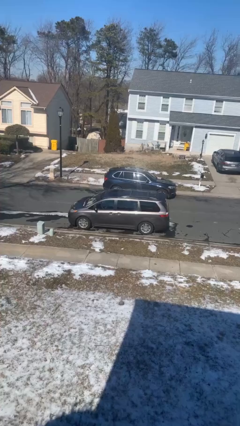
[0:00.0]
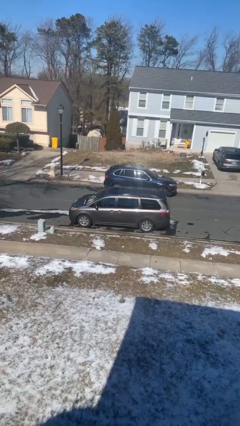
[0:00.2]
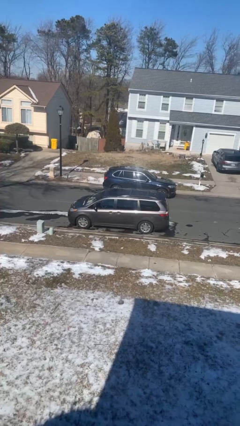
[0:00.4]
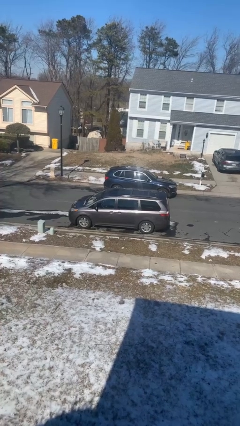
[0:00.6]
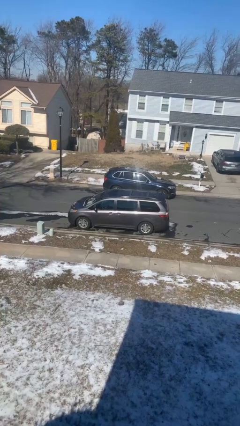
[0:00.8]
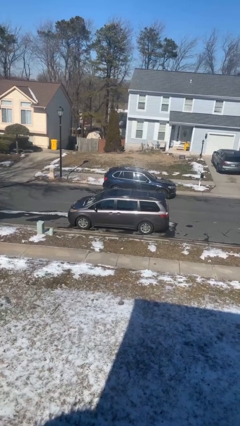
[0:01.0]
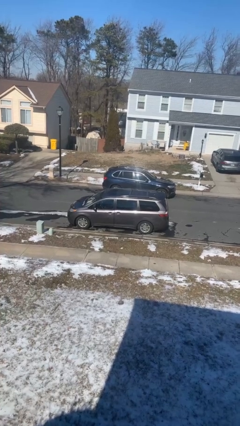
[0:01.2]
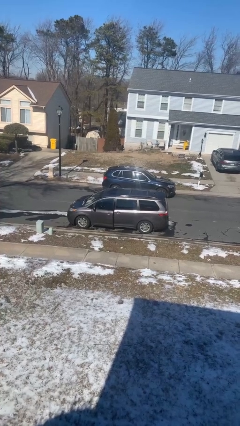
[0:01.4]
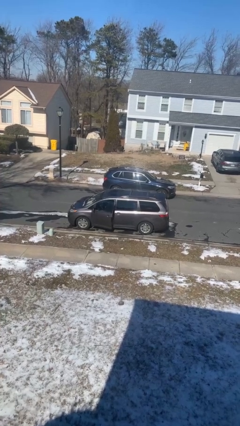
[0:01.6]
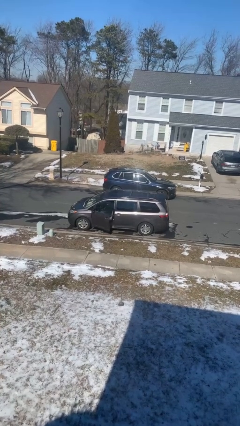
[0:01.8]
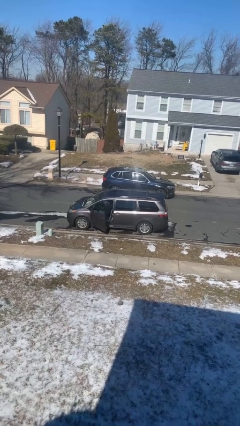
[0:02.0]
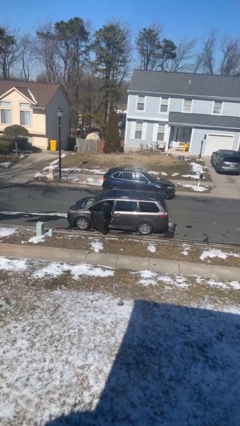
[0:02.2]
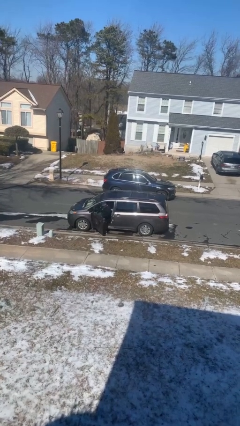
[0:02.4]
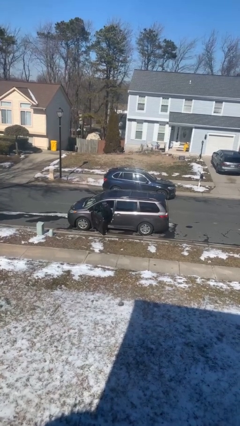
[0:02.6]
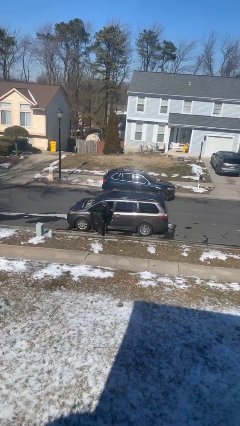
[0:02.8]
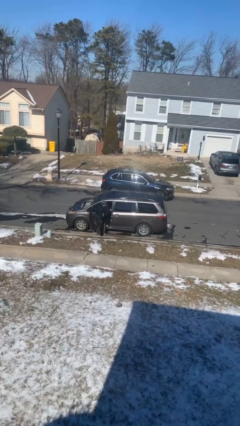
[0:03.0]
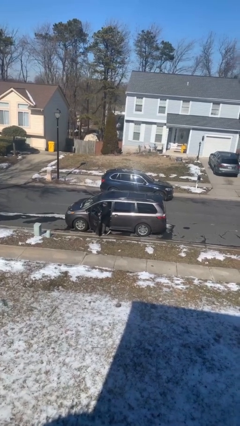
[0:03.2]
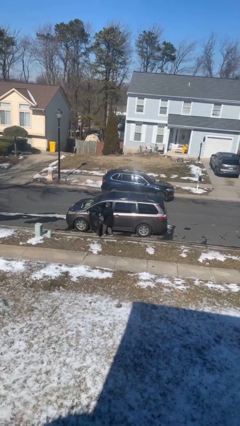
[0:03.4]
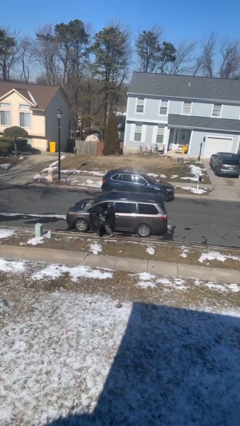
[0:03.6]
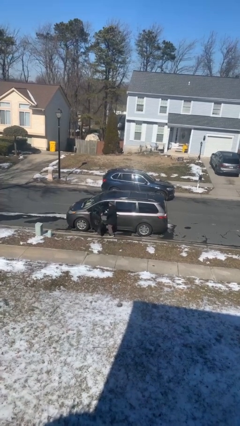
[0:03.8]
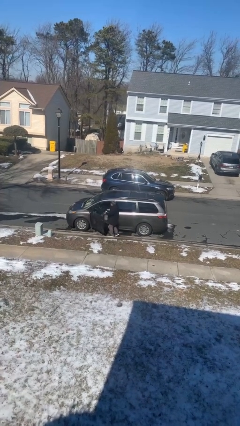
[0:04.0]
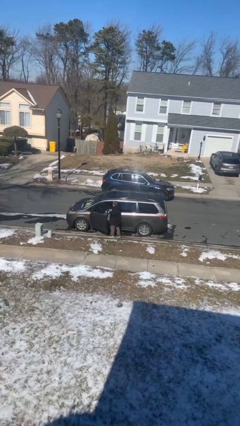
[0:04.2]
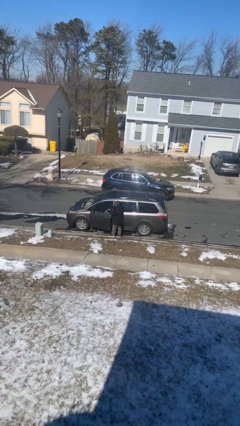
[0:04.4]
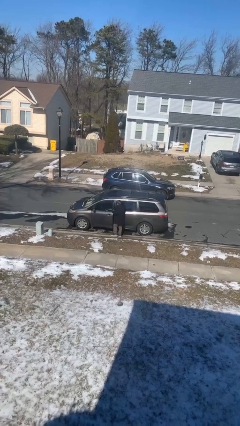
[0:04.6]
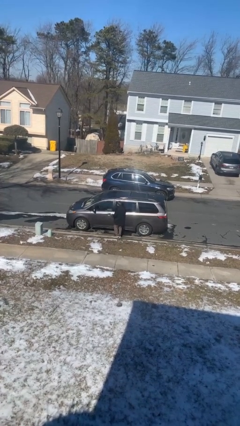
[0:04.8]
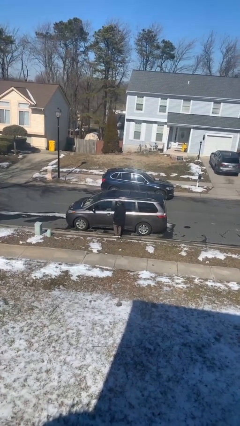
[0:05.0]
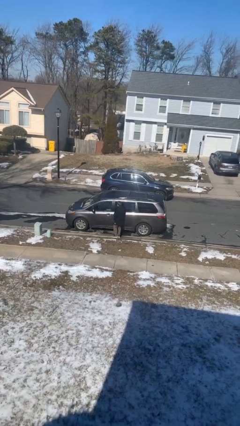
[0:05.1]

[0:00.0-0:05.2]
car drops off person

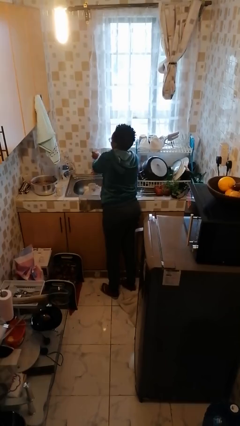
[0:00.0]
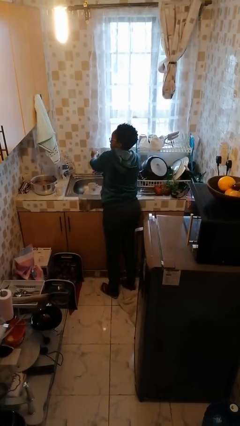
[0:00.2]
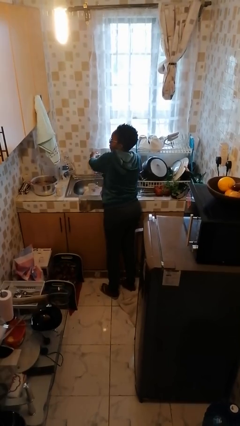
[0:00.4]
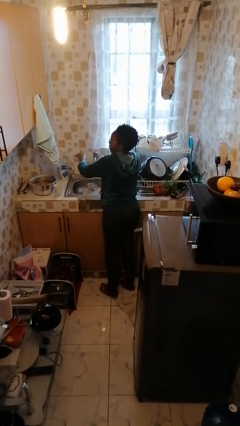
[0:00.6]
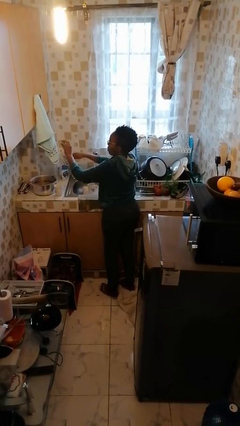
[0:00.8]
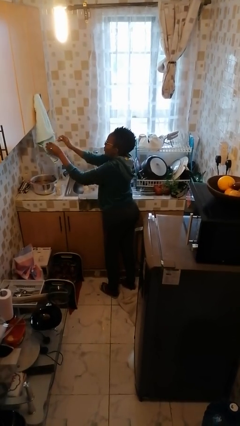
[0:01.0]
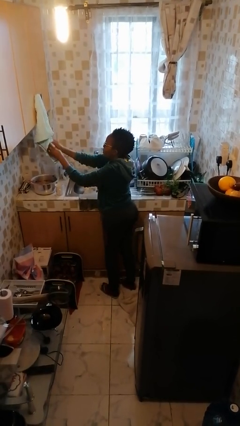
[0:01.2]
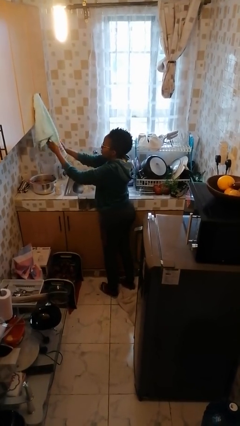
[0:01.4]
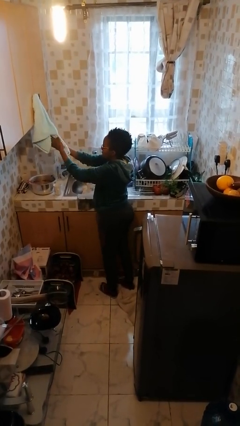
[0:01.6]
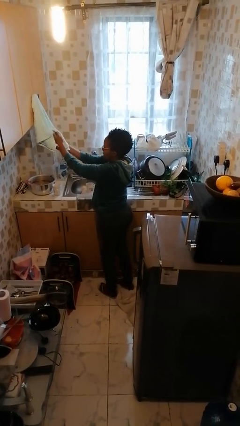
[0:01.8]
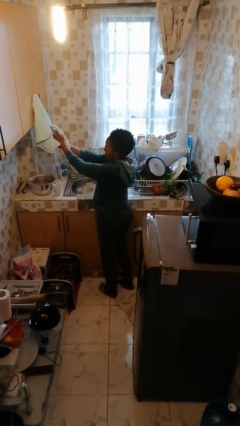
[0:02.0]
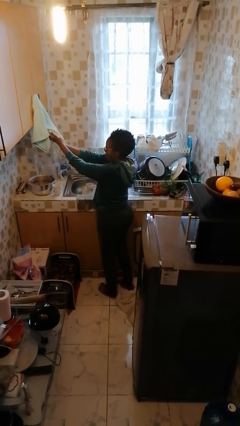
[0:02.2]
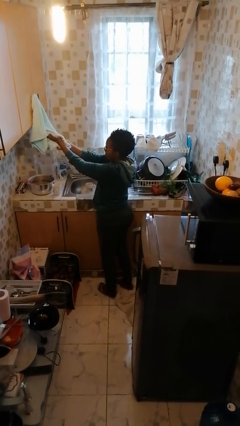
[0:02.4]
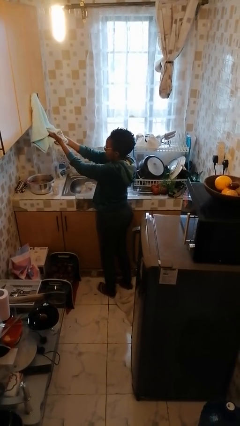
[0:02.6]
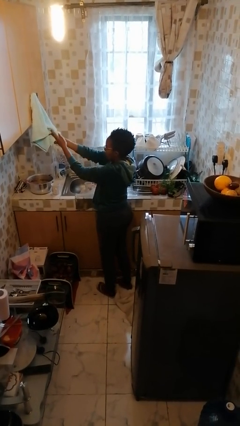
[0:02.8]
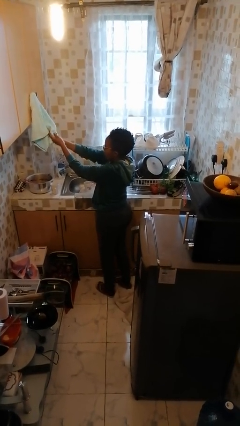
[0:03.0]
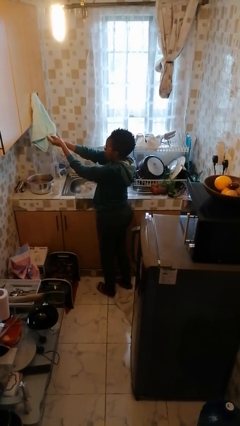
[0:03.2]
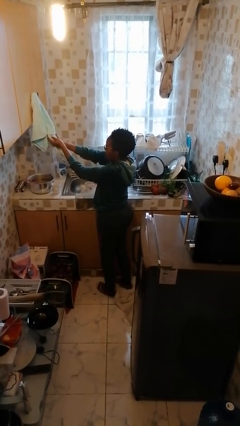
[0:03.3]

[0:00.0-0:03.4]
person dries hands with towel

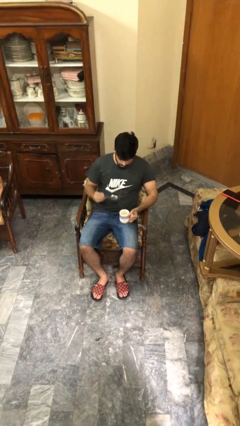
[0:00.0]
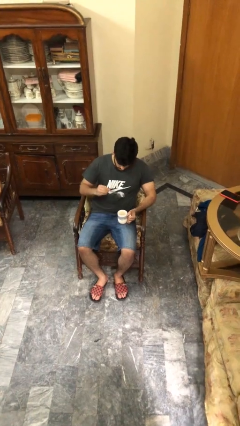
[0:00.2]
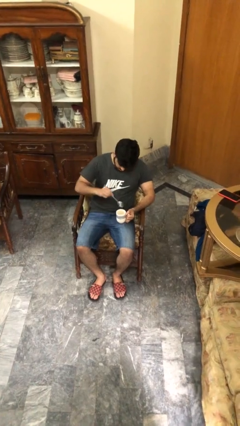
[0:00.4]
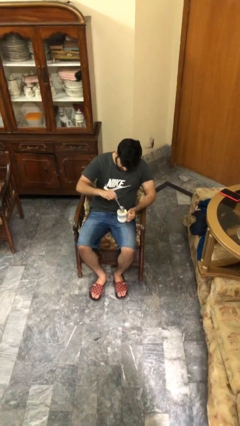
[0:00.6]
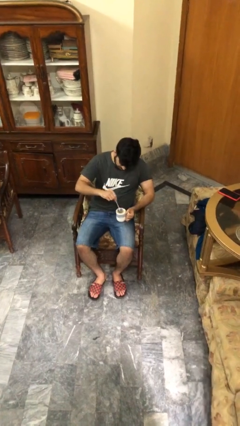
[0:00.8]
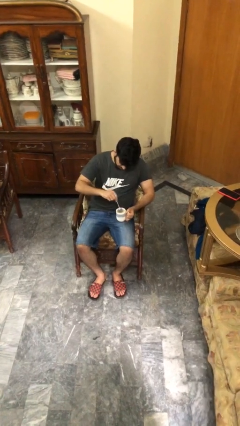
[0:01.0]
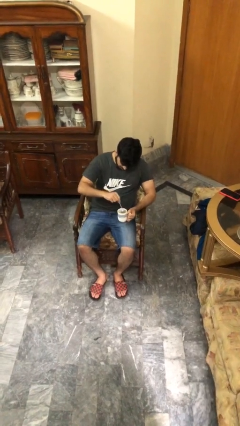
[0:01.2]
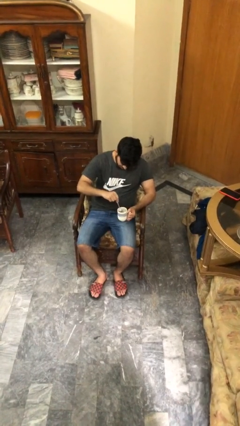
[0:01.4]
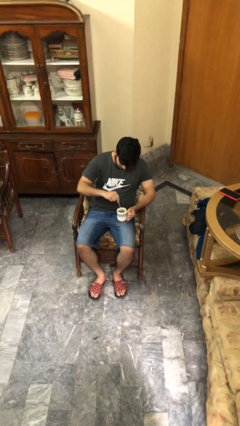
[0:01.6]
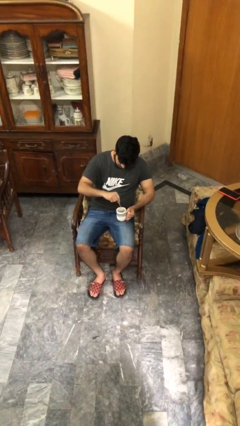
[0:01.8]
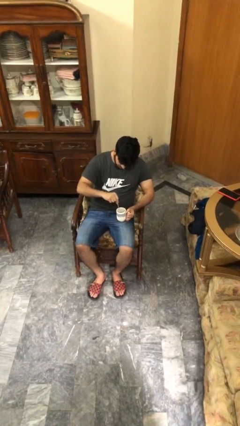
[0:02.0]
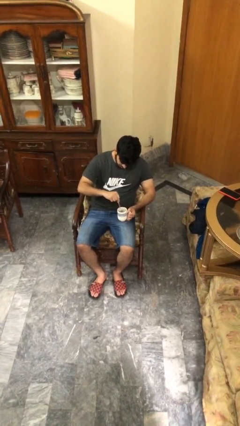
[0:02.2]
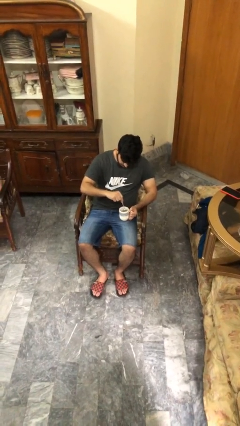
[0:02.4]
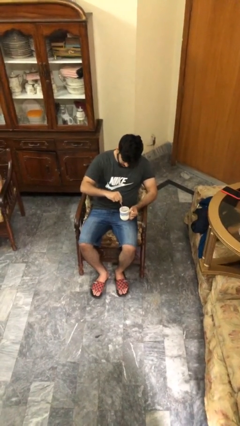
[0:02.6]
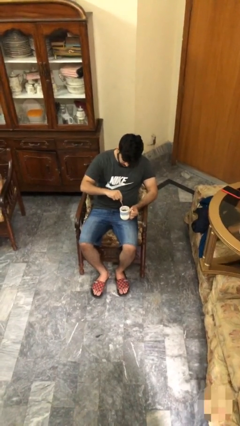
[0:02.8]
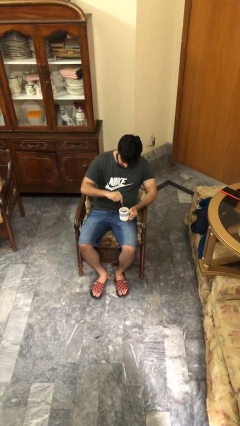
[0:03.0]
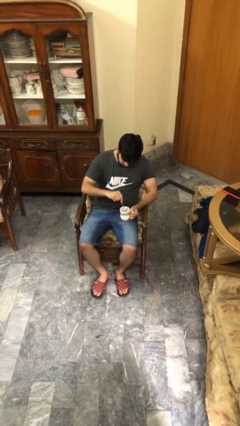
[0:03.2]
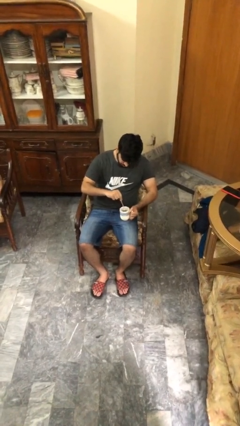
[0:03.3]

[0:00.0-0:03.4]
person stirs mug

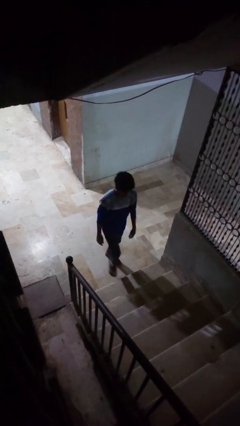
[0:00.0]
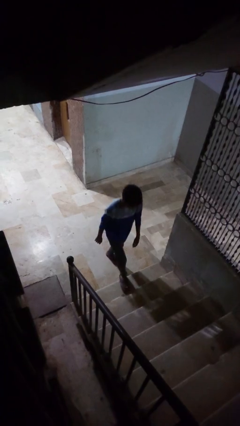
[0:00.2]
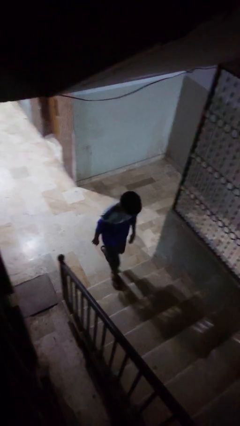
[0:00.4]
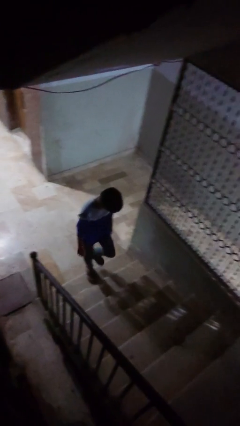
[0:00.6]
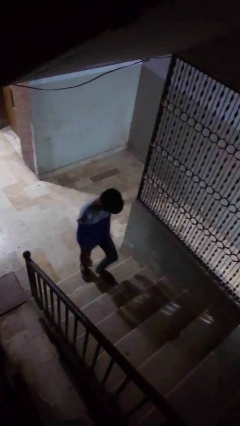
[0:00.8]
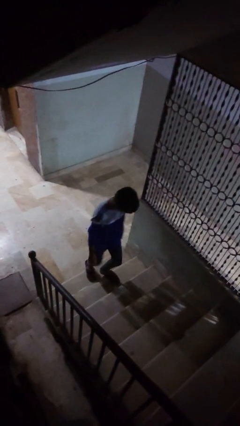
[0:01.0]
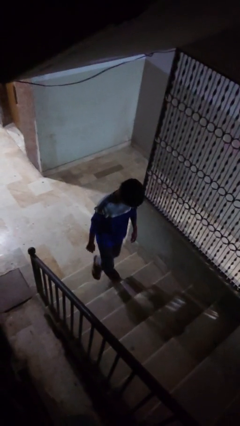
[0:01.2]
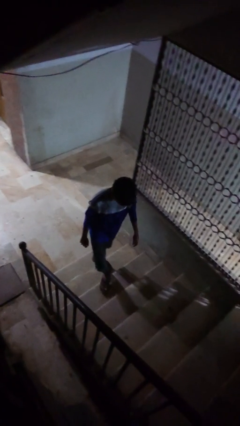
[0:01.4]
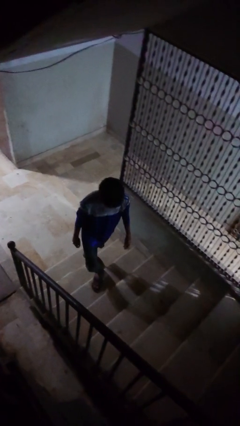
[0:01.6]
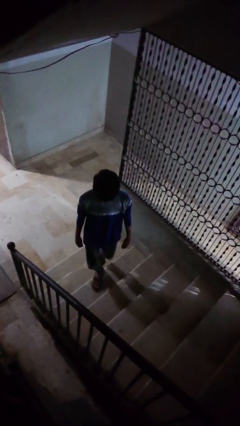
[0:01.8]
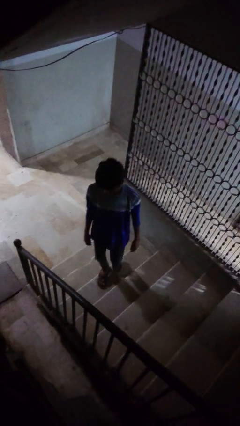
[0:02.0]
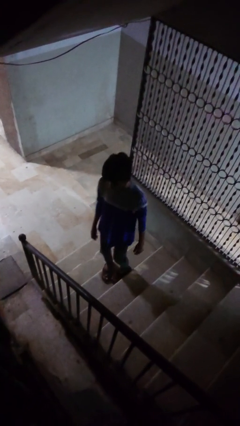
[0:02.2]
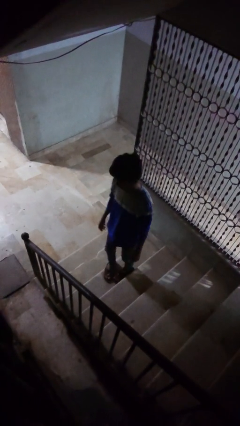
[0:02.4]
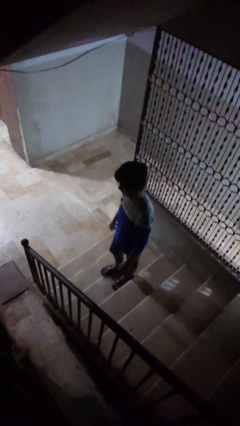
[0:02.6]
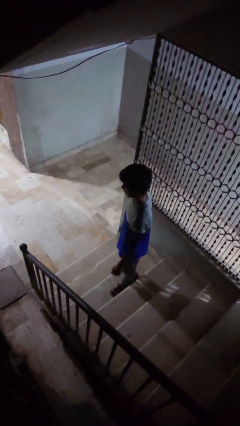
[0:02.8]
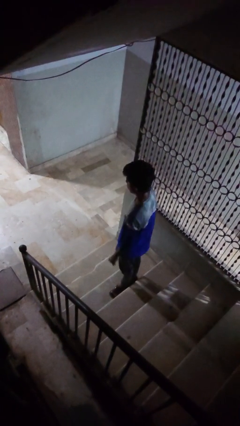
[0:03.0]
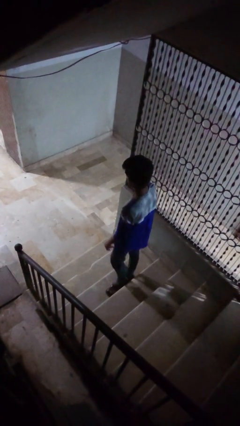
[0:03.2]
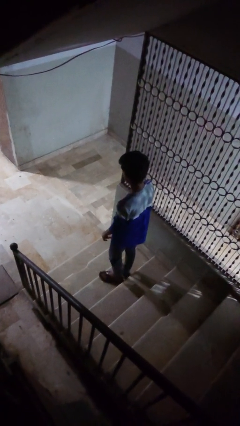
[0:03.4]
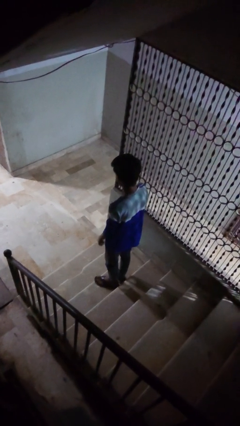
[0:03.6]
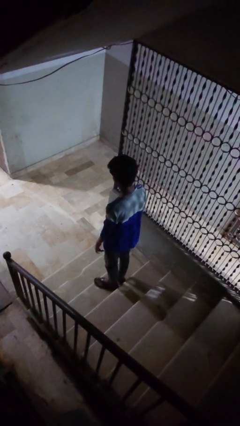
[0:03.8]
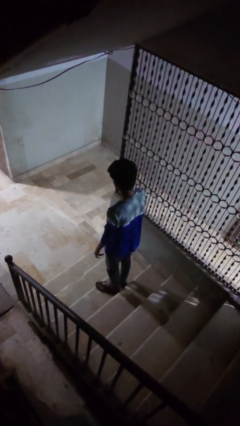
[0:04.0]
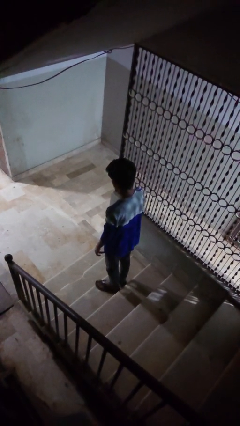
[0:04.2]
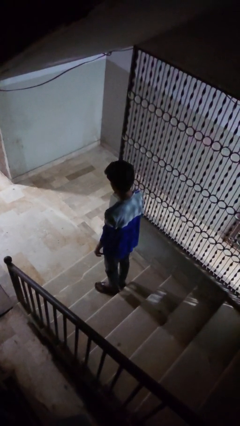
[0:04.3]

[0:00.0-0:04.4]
person climbs down stairs

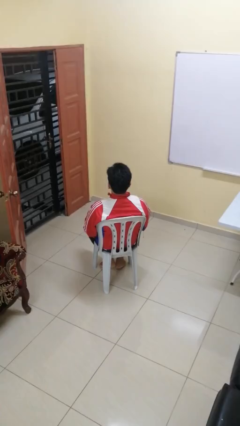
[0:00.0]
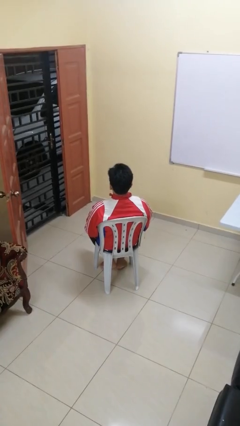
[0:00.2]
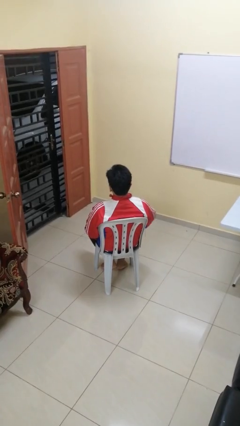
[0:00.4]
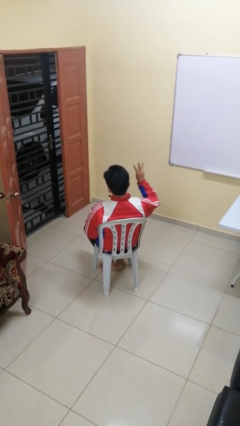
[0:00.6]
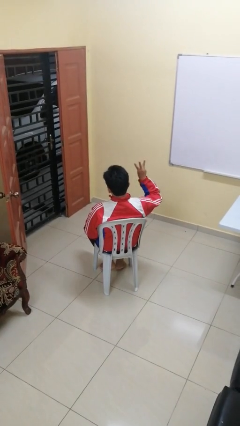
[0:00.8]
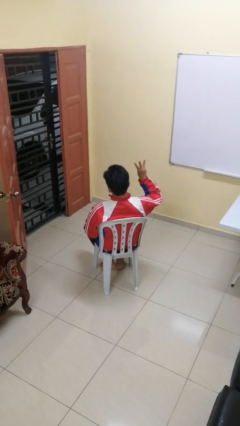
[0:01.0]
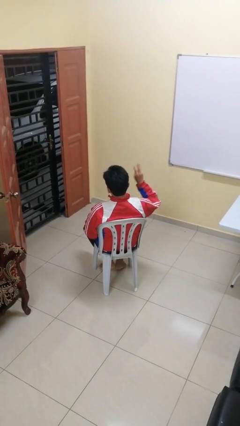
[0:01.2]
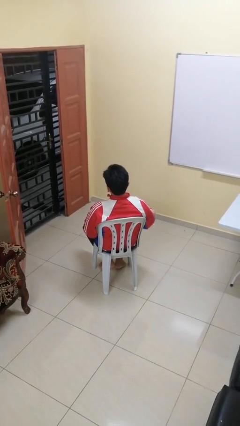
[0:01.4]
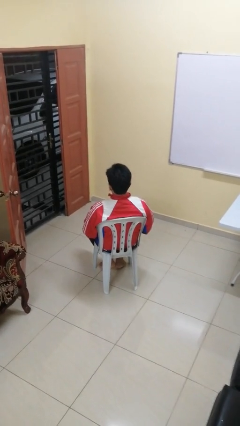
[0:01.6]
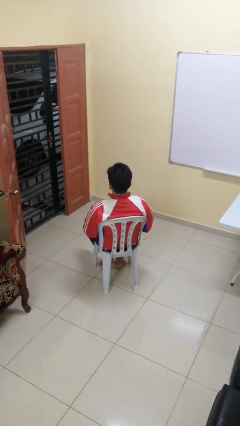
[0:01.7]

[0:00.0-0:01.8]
person gestures number three
